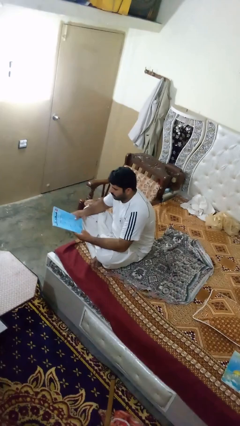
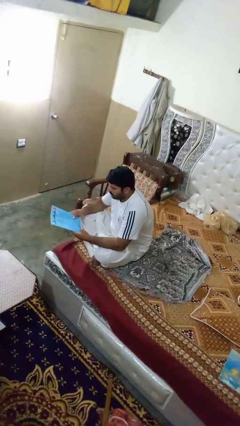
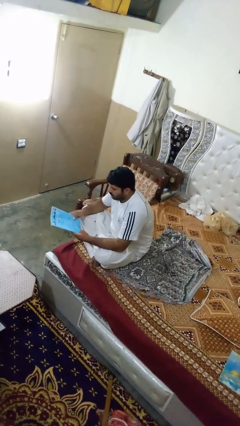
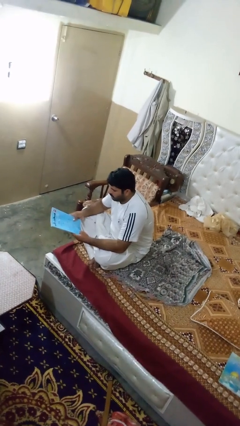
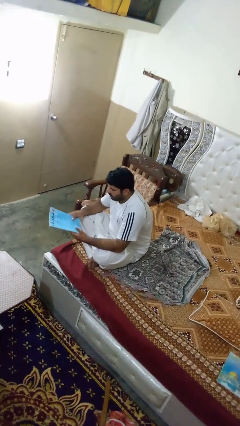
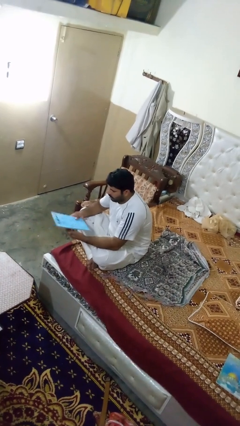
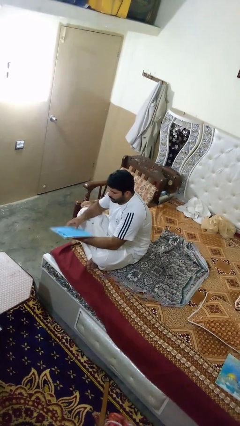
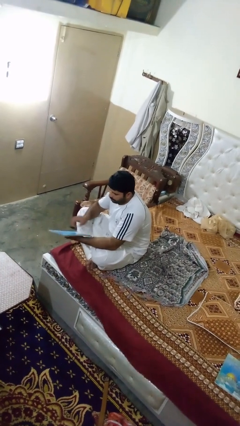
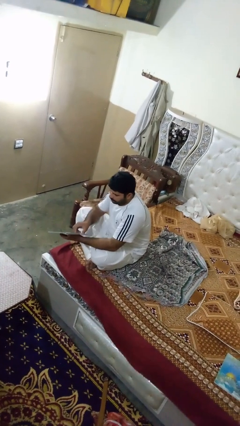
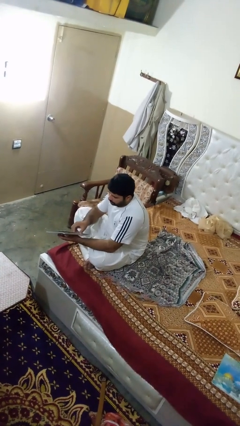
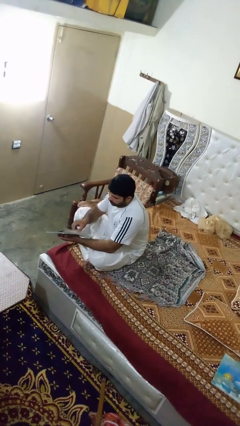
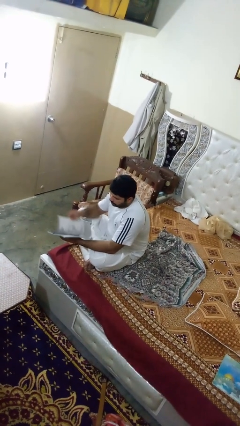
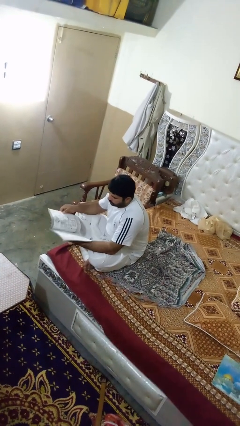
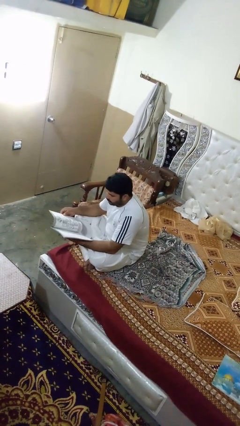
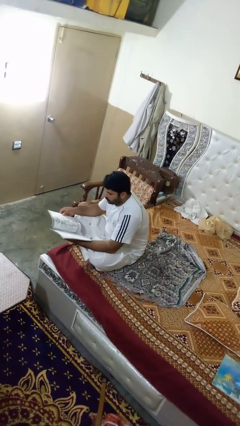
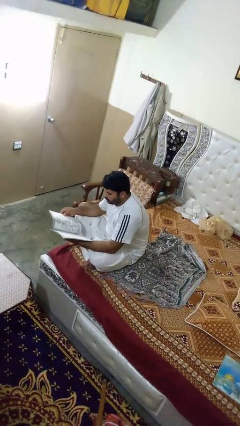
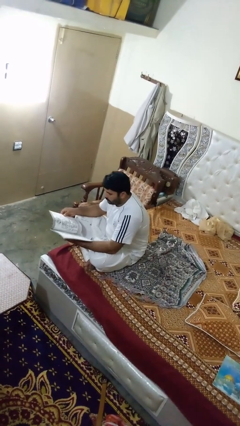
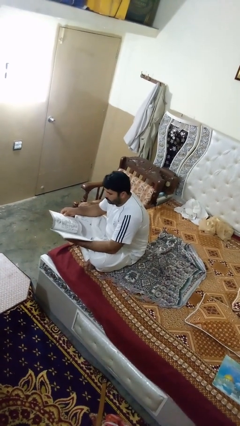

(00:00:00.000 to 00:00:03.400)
person reads magazine

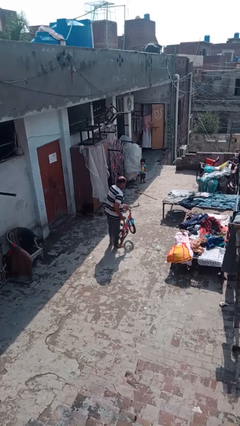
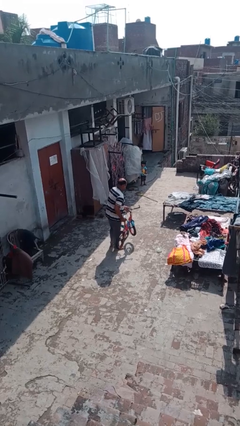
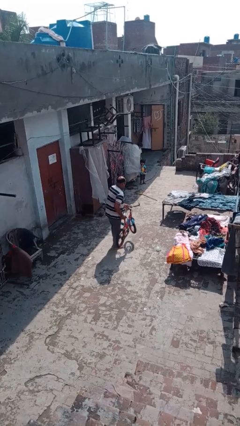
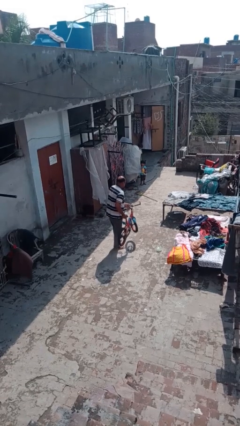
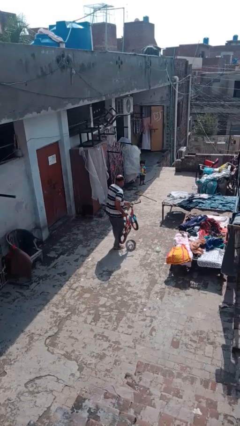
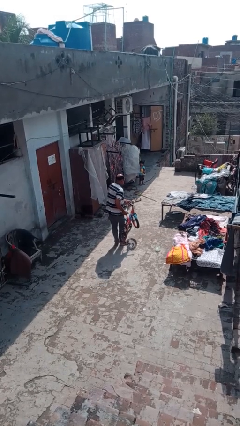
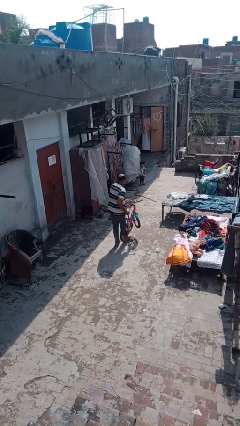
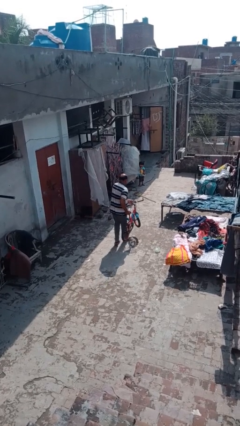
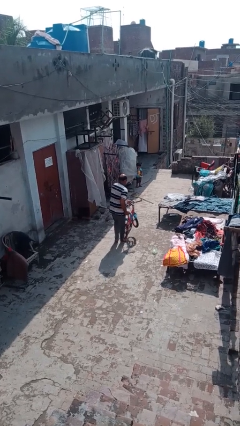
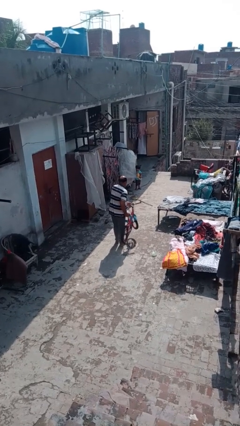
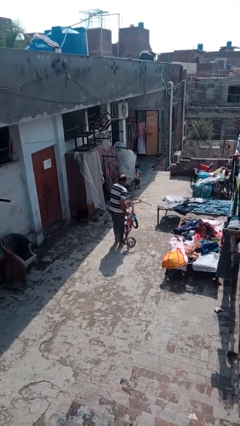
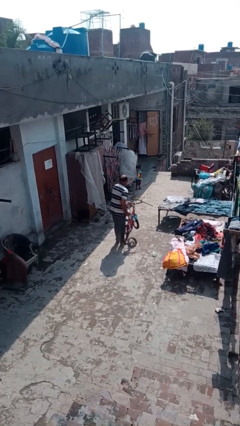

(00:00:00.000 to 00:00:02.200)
person carries bicycle

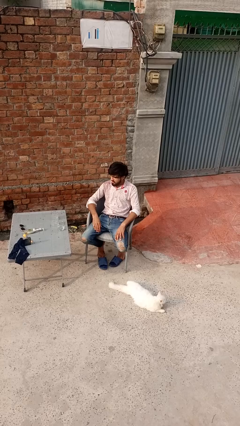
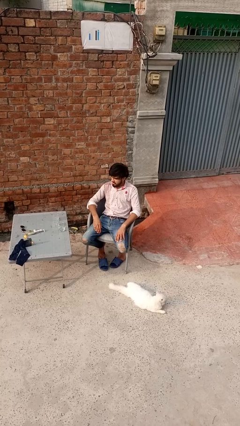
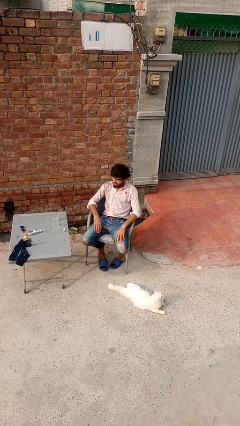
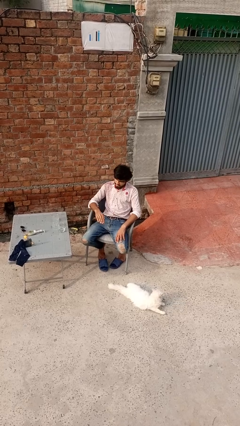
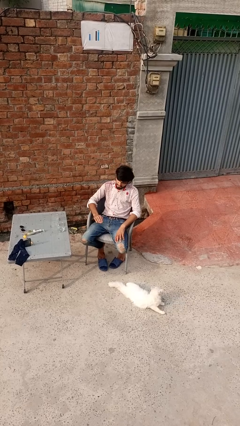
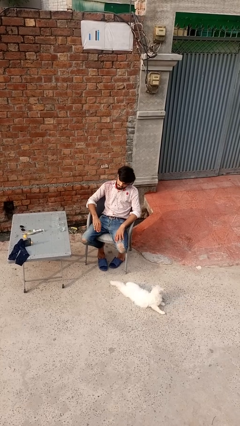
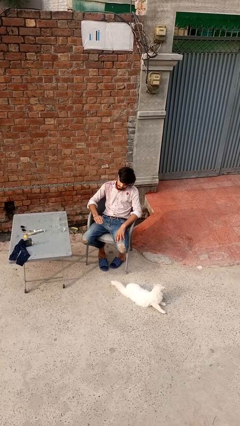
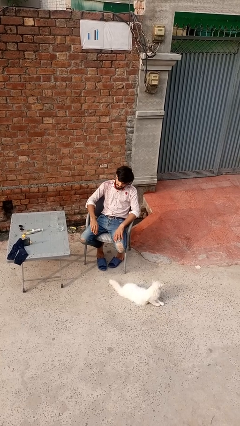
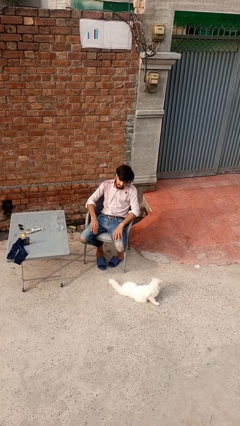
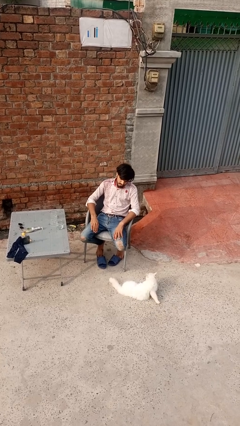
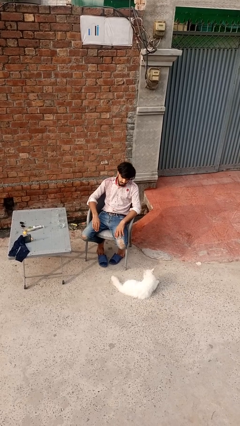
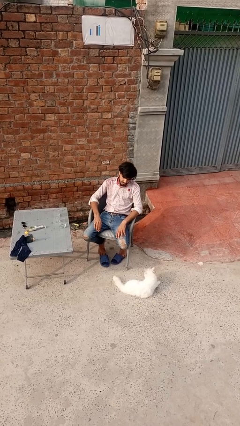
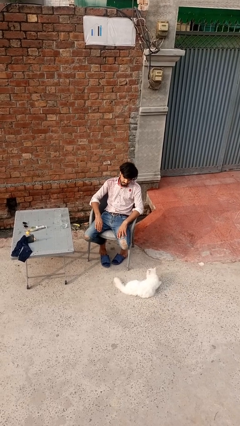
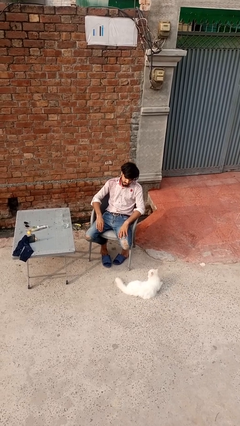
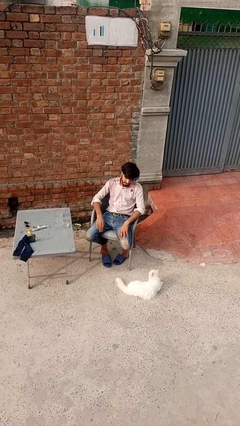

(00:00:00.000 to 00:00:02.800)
person slaps hands on thighs

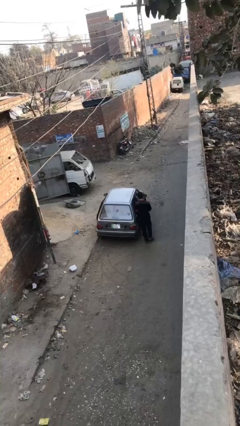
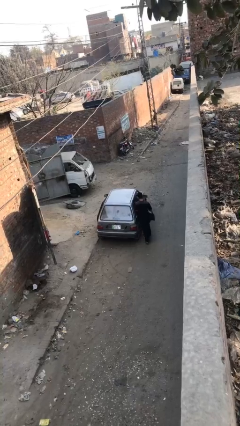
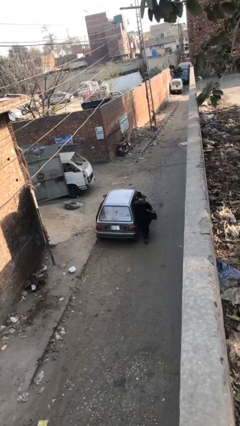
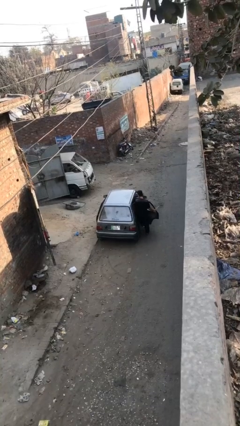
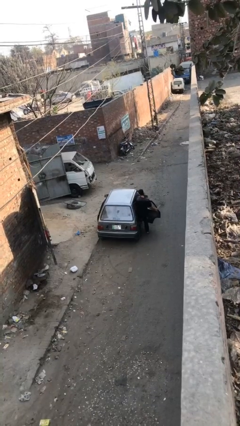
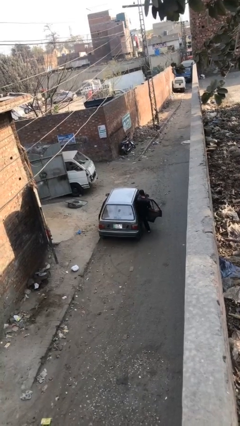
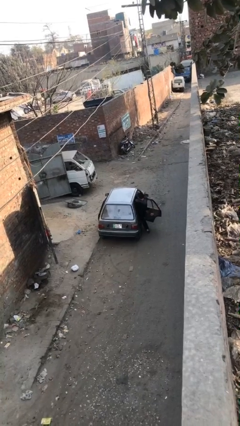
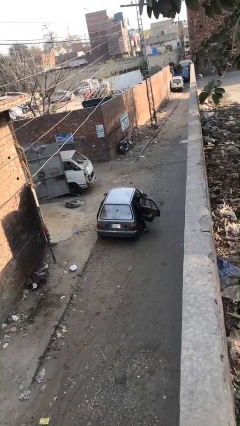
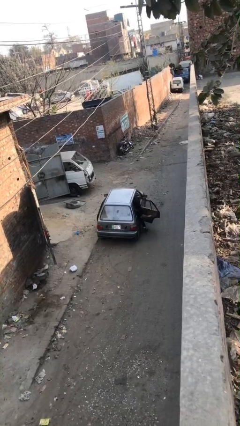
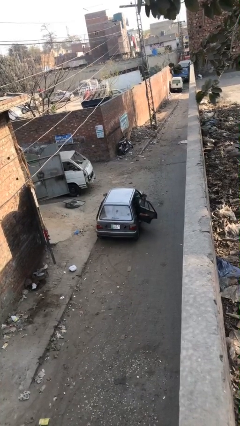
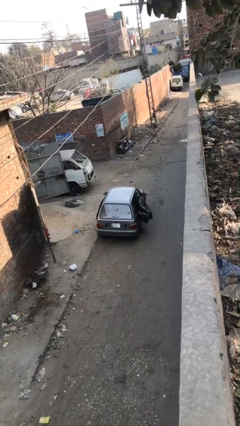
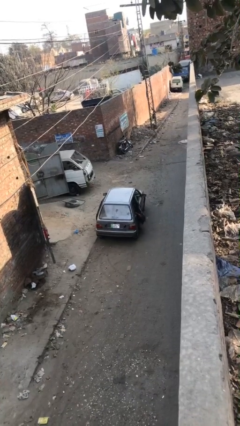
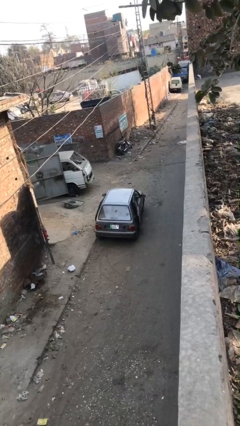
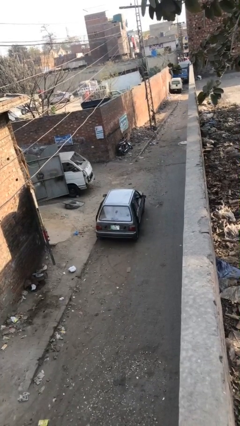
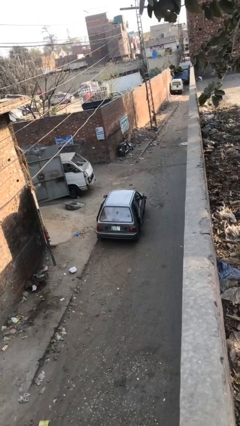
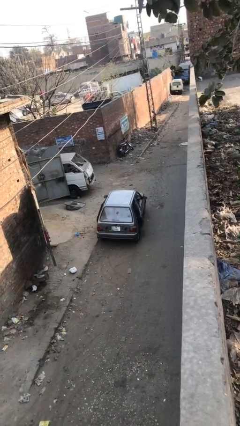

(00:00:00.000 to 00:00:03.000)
car picks up person

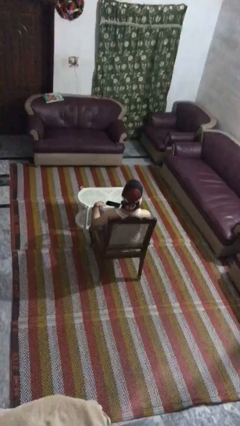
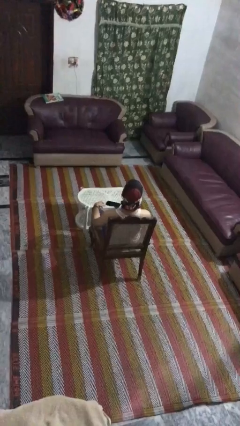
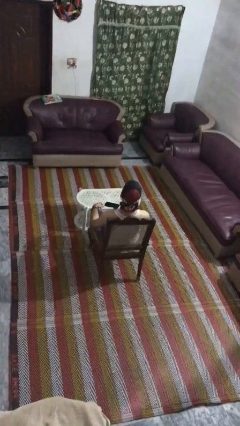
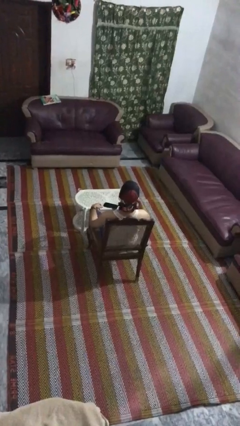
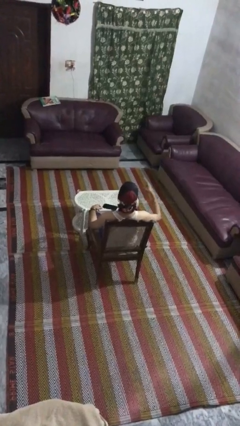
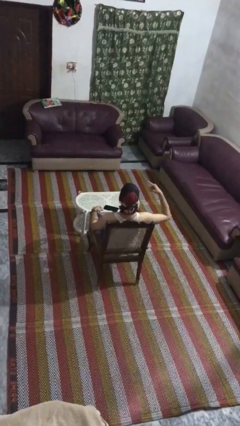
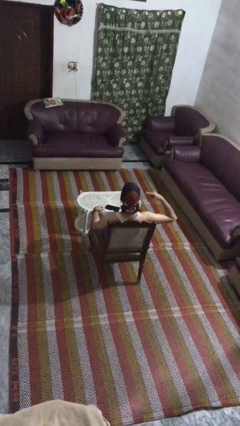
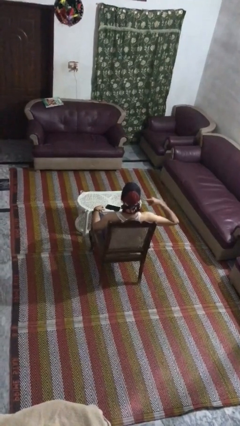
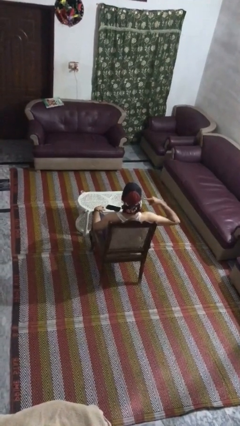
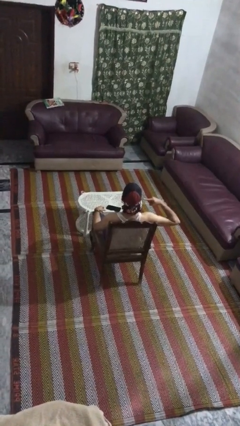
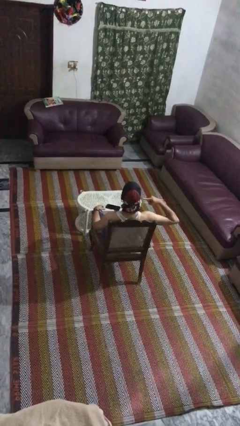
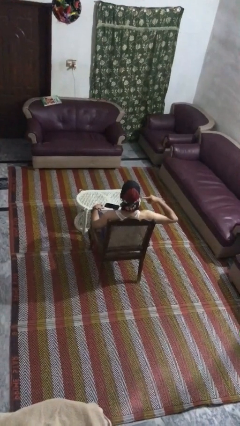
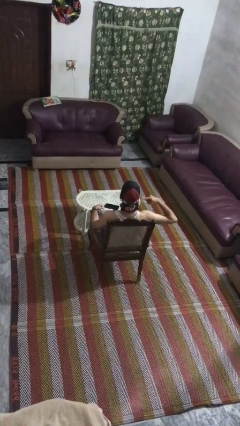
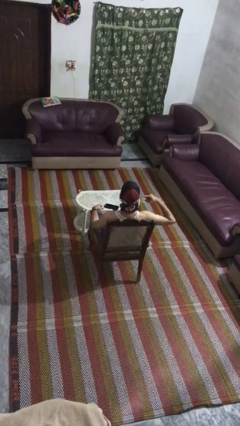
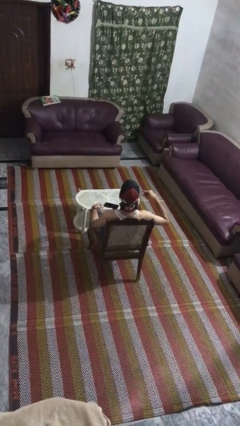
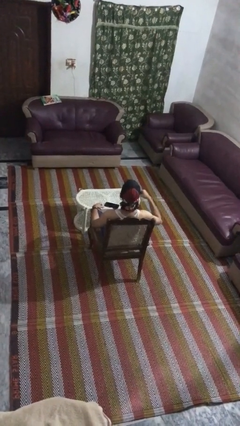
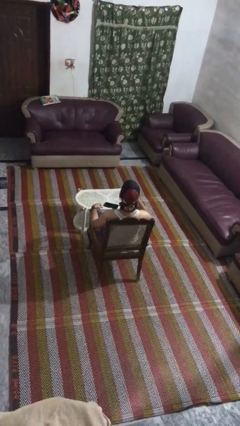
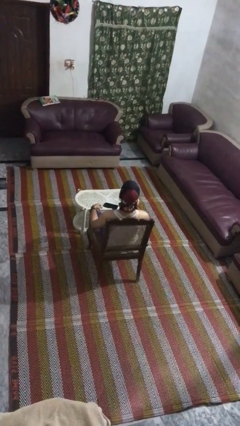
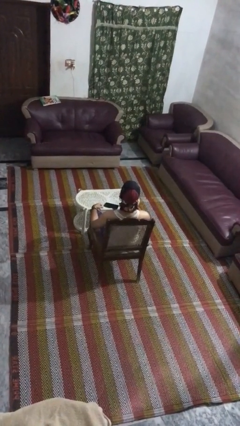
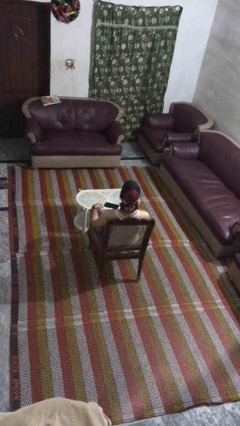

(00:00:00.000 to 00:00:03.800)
person gestures listen closely

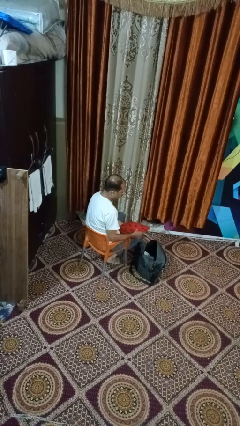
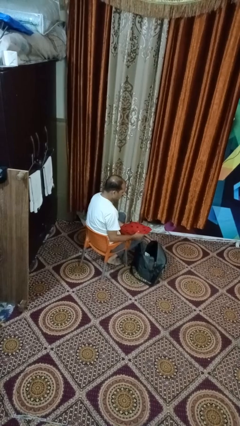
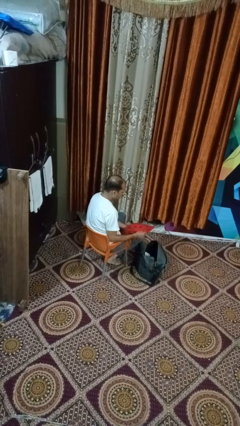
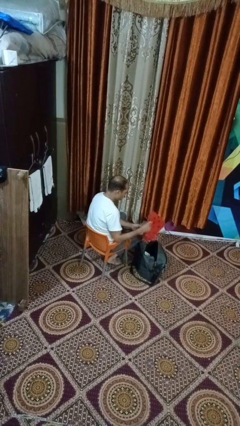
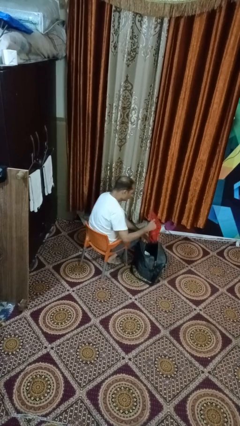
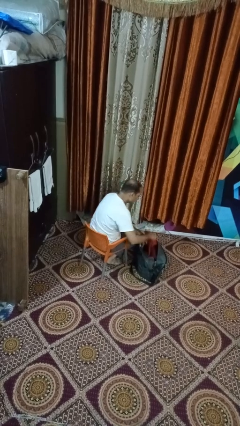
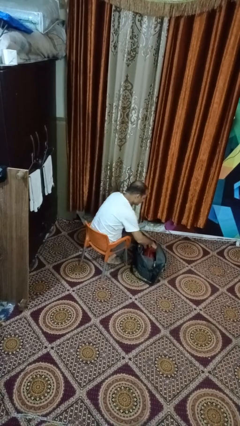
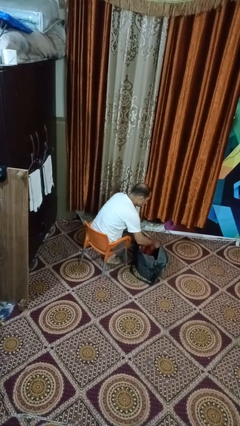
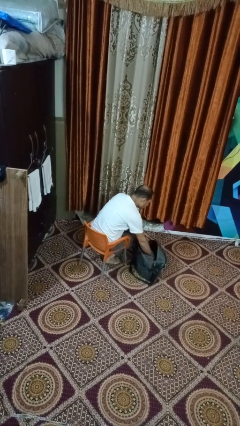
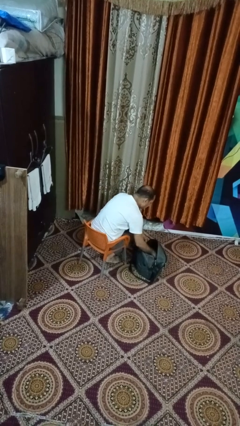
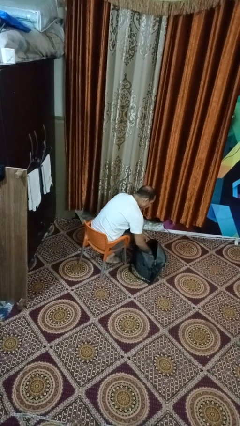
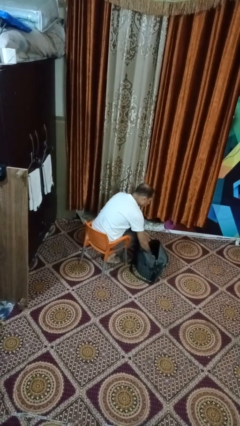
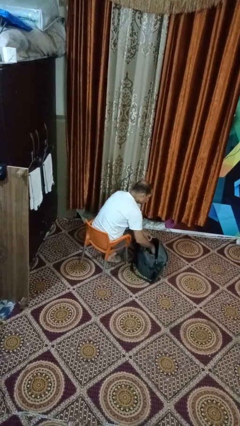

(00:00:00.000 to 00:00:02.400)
person puts object into backpack
